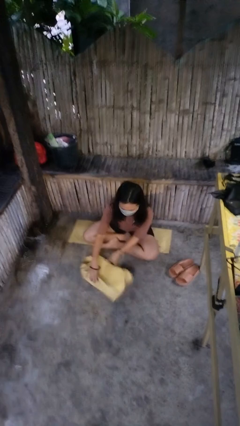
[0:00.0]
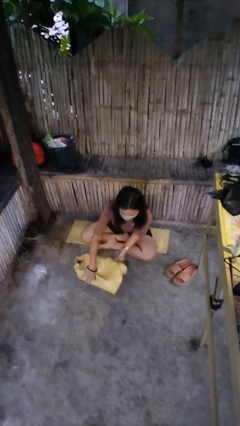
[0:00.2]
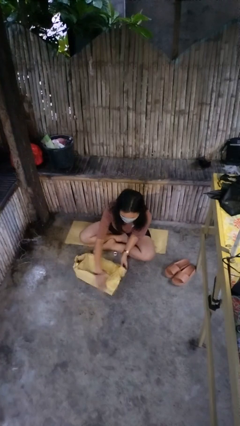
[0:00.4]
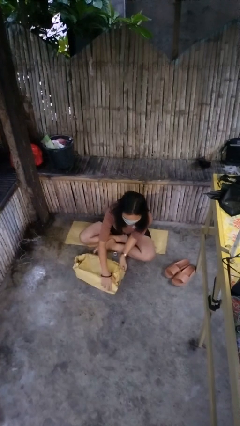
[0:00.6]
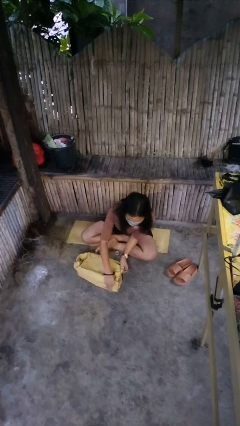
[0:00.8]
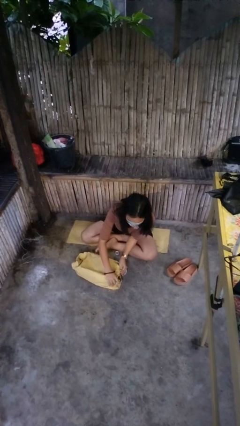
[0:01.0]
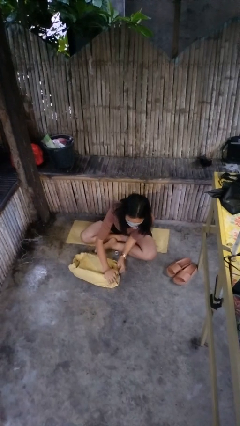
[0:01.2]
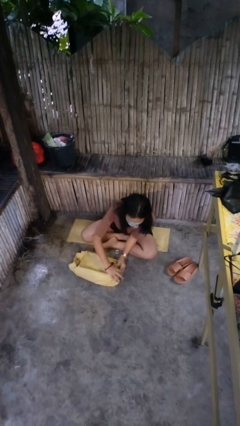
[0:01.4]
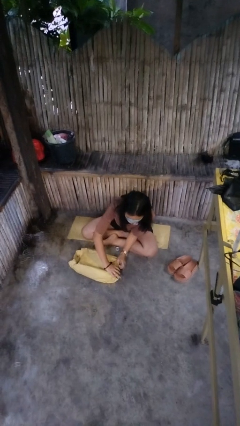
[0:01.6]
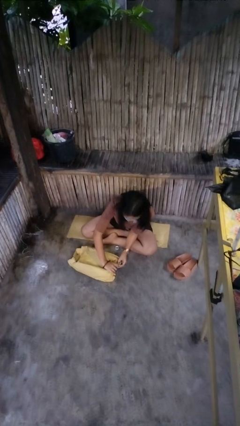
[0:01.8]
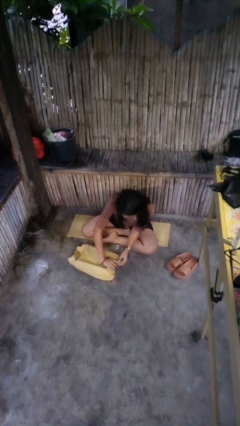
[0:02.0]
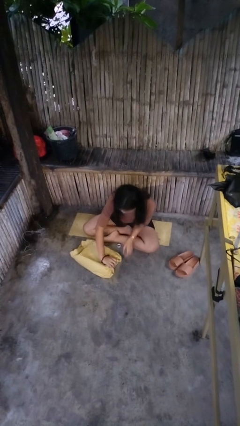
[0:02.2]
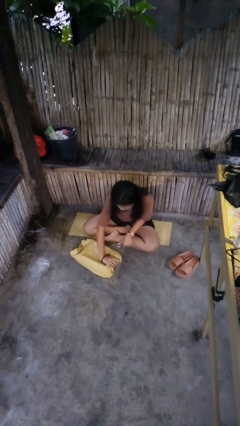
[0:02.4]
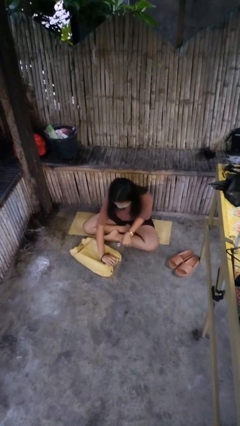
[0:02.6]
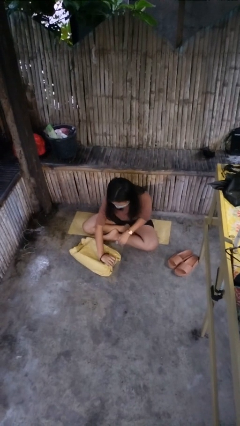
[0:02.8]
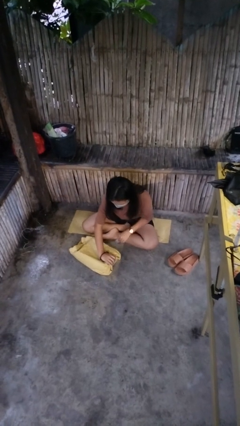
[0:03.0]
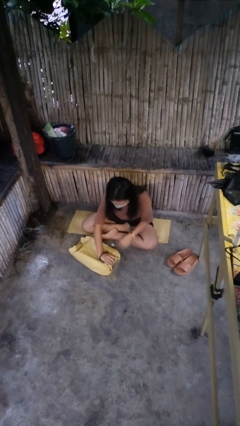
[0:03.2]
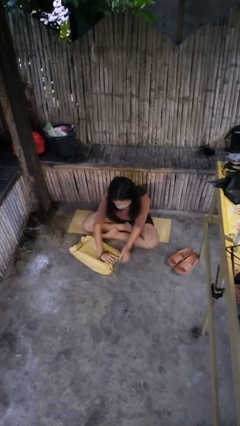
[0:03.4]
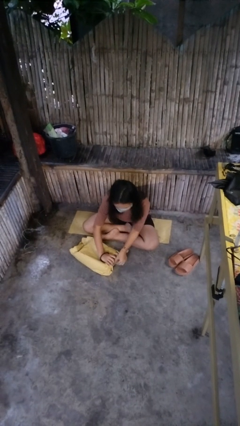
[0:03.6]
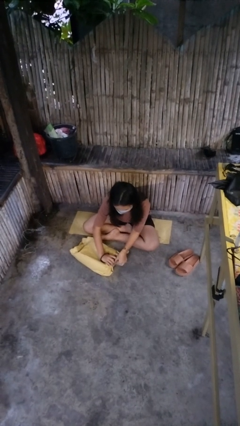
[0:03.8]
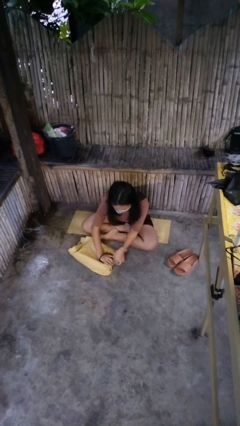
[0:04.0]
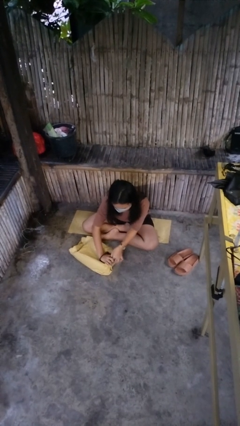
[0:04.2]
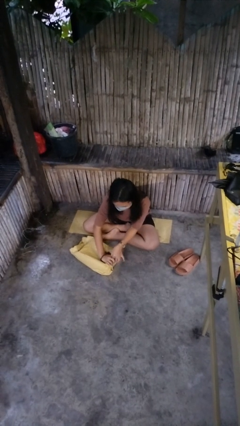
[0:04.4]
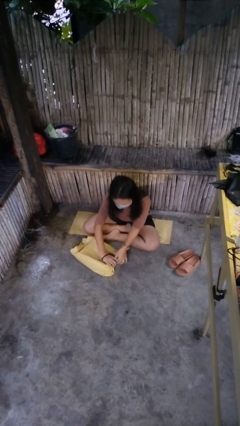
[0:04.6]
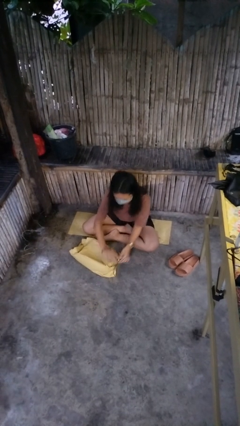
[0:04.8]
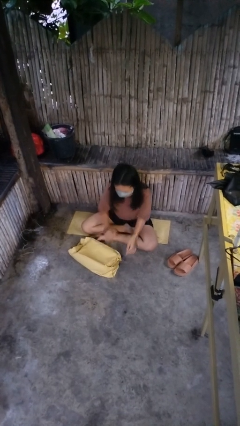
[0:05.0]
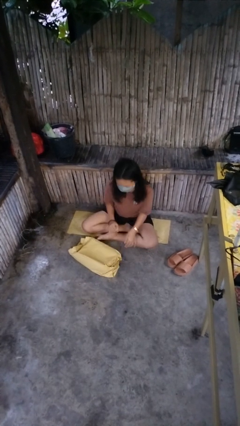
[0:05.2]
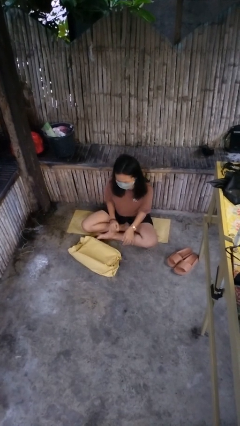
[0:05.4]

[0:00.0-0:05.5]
person wraps box

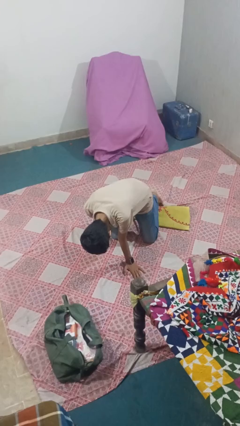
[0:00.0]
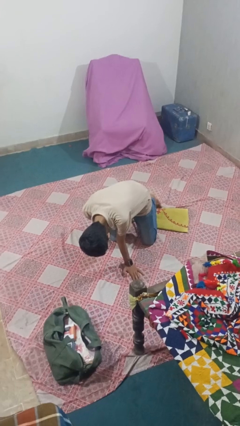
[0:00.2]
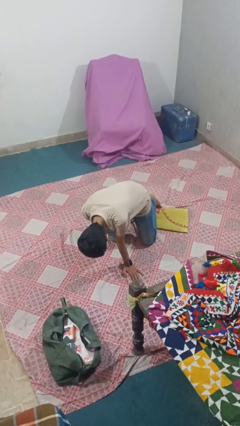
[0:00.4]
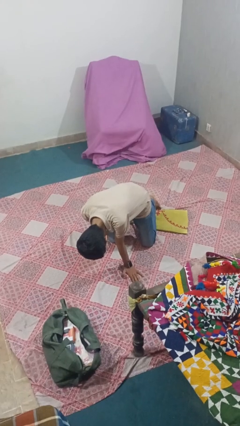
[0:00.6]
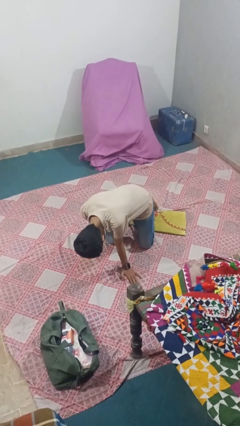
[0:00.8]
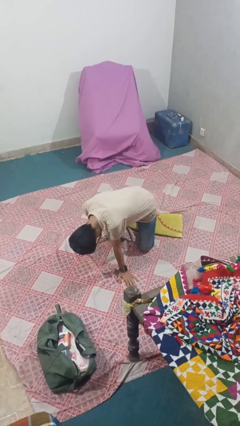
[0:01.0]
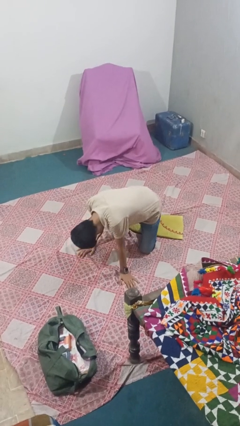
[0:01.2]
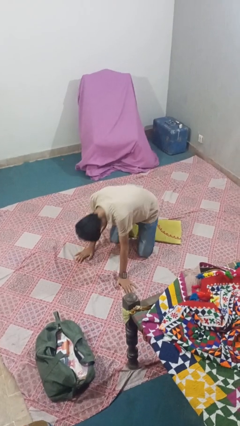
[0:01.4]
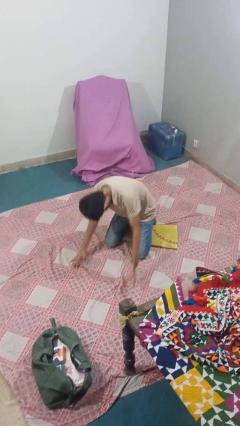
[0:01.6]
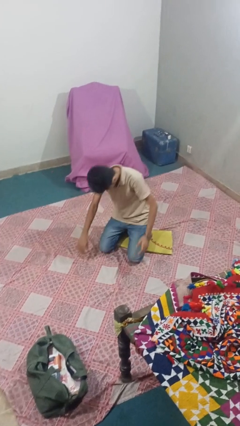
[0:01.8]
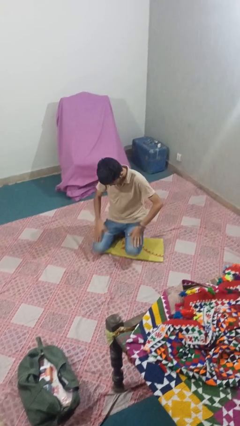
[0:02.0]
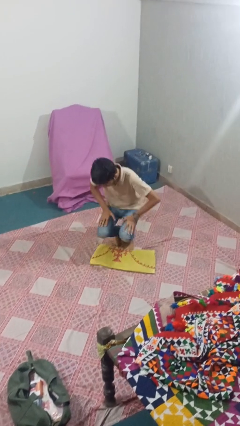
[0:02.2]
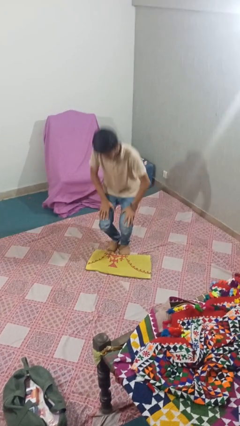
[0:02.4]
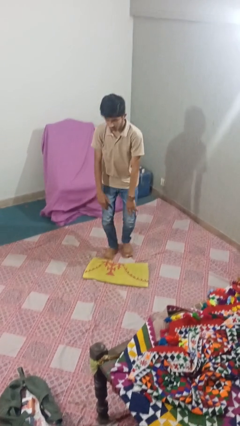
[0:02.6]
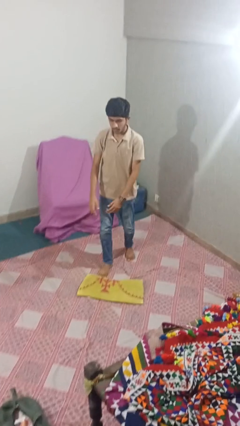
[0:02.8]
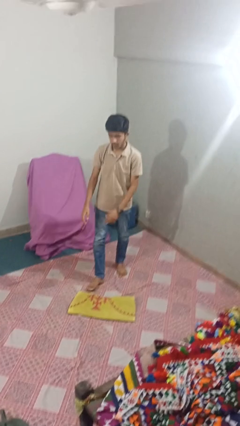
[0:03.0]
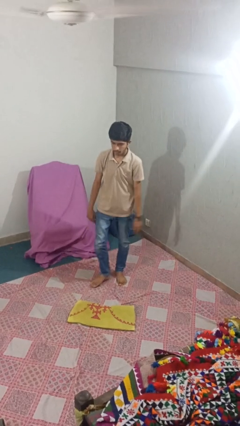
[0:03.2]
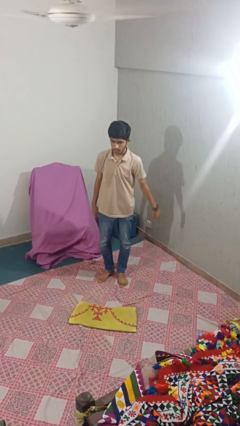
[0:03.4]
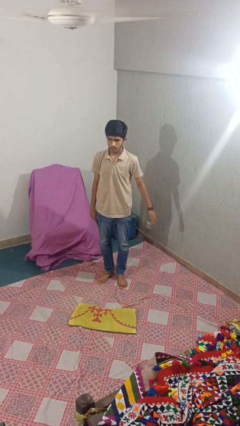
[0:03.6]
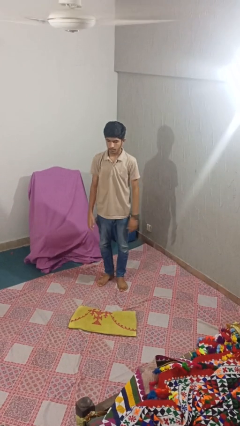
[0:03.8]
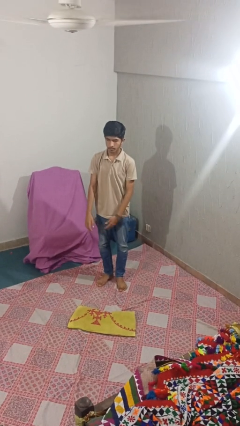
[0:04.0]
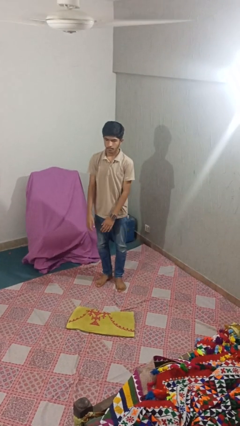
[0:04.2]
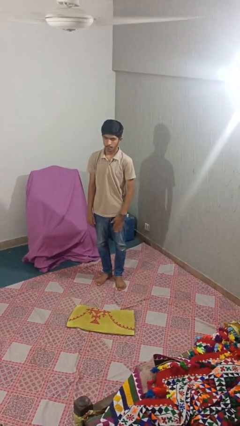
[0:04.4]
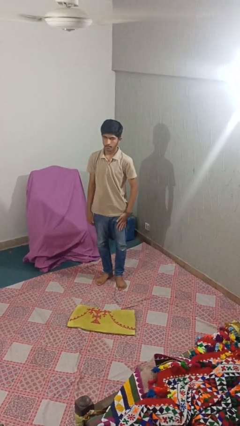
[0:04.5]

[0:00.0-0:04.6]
person stands up from floor

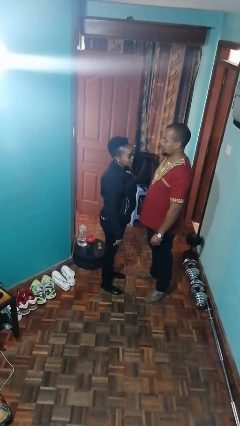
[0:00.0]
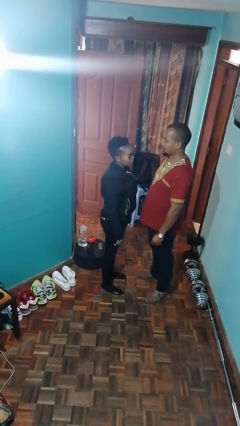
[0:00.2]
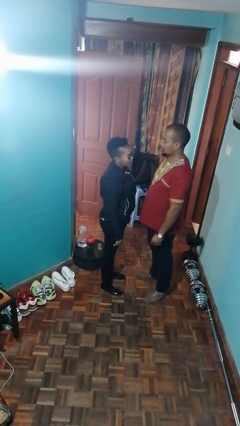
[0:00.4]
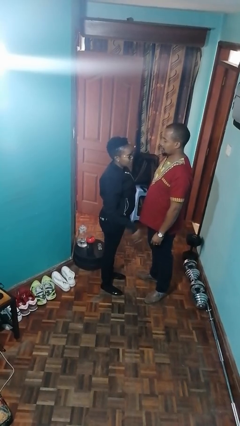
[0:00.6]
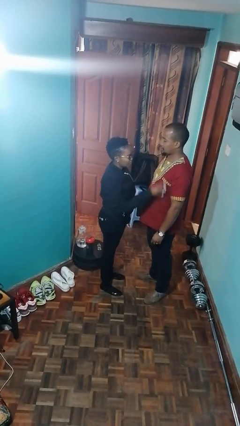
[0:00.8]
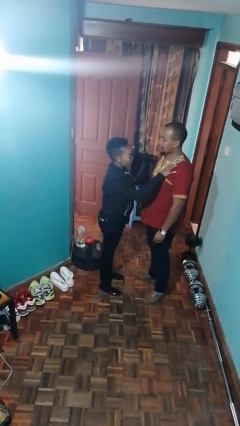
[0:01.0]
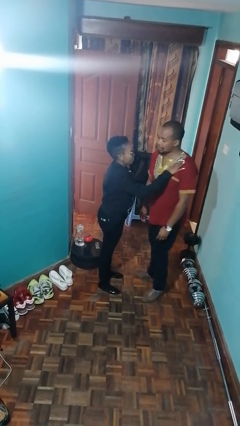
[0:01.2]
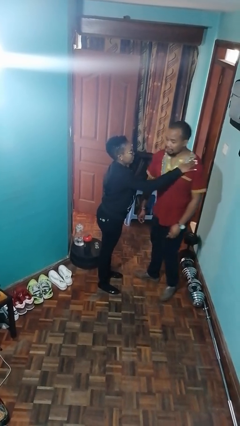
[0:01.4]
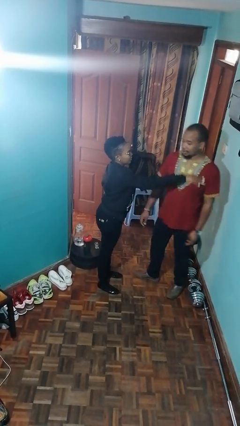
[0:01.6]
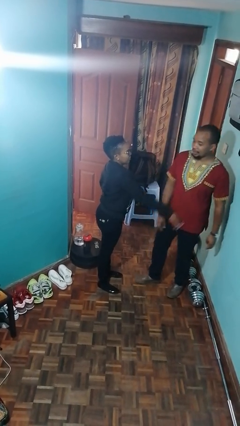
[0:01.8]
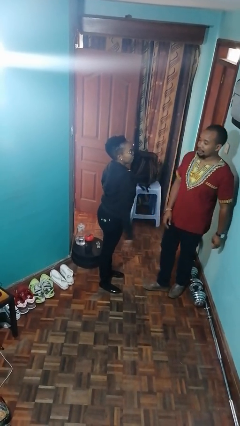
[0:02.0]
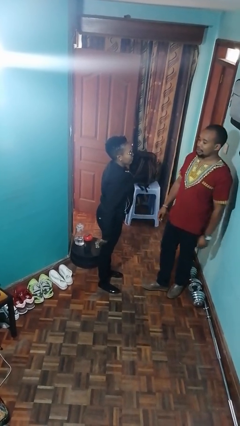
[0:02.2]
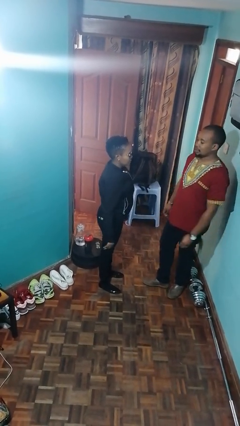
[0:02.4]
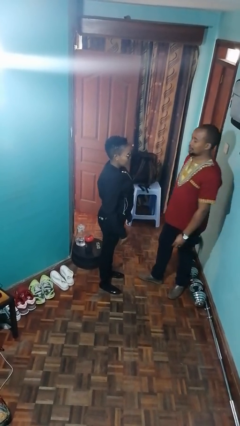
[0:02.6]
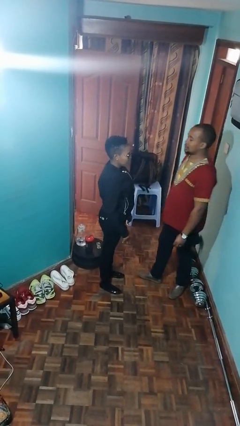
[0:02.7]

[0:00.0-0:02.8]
person shoves person

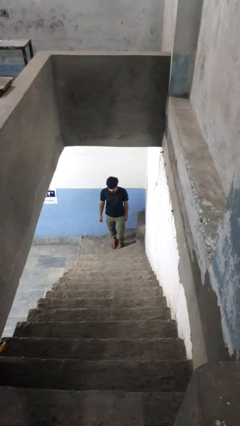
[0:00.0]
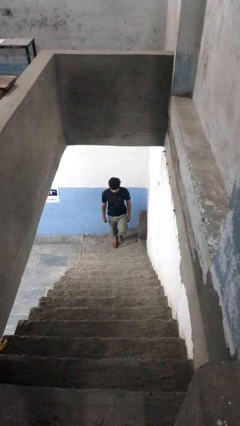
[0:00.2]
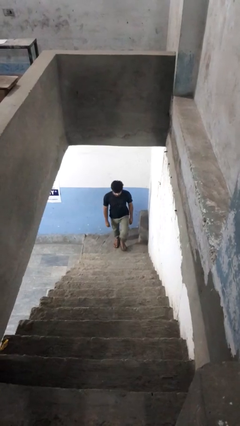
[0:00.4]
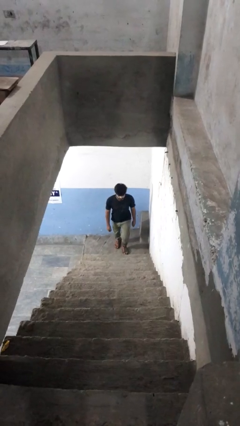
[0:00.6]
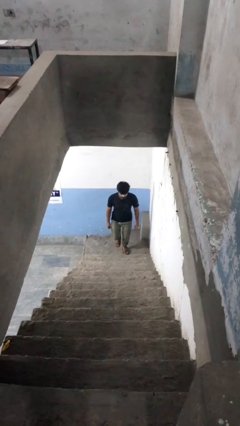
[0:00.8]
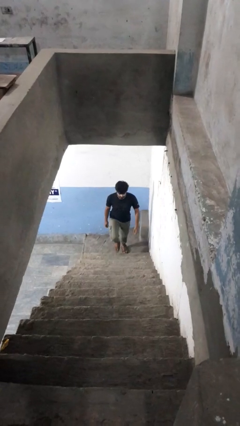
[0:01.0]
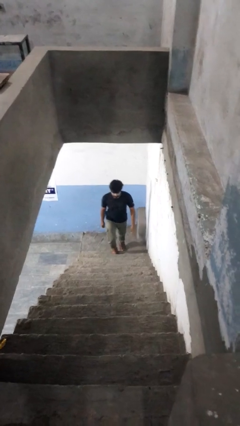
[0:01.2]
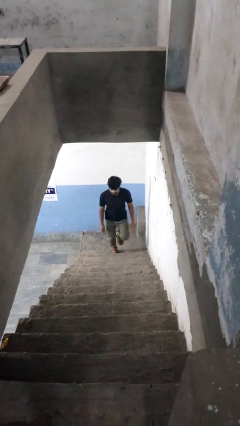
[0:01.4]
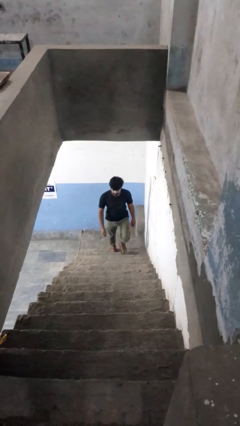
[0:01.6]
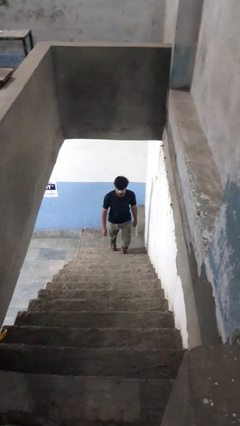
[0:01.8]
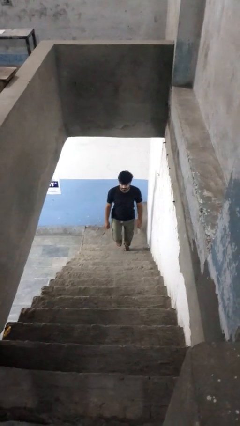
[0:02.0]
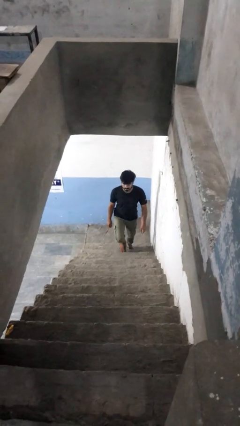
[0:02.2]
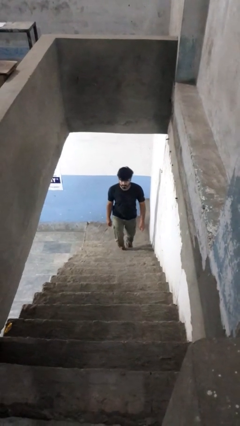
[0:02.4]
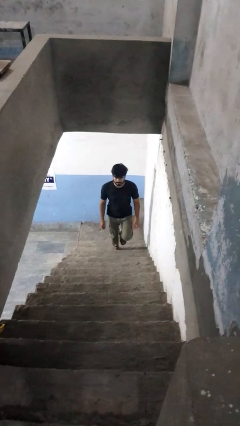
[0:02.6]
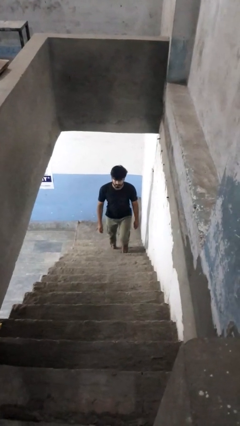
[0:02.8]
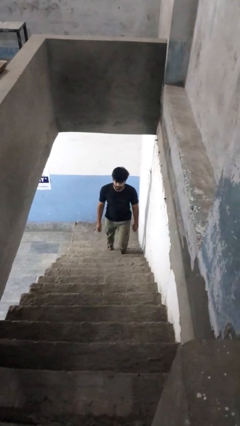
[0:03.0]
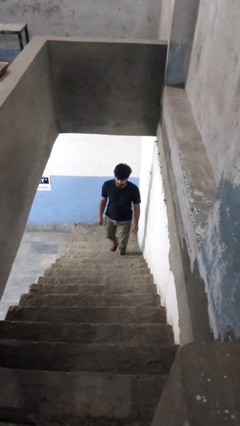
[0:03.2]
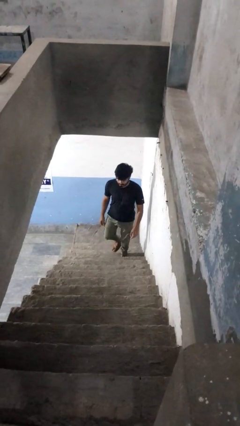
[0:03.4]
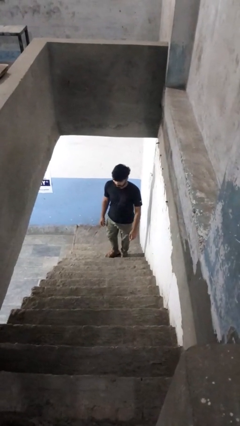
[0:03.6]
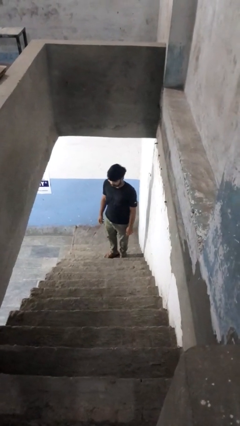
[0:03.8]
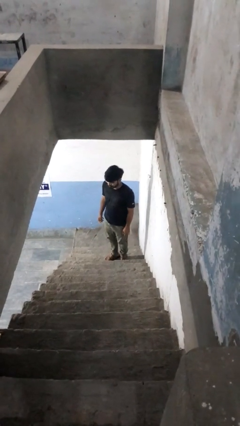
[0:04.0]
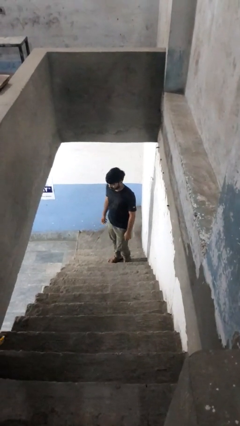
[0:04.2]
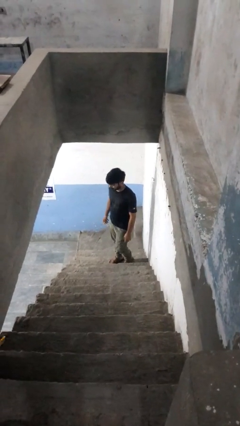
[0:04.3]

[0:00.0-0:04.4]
person climbs up stairs

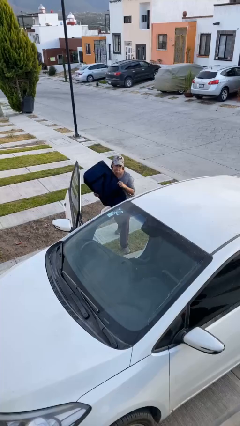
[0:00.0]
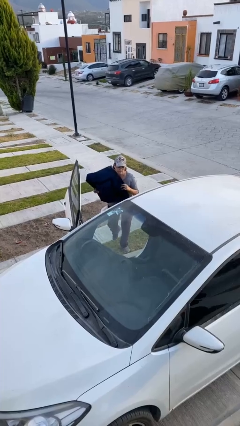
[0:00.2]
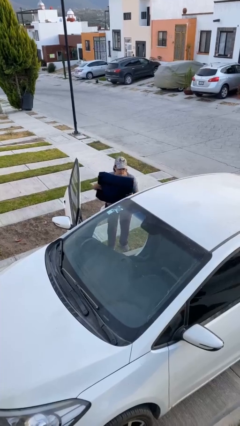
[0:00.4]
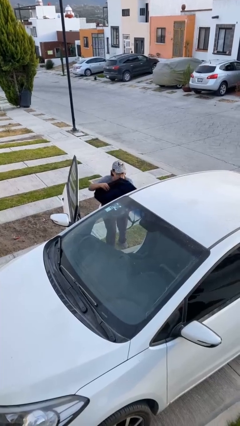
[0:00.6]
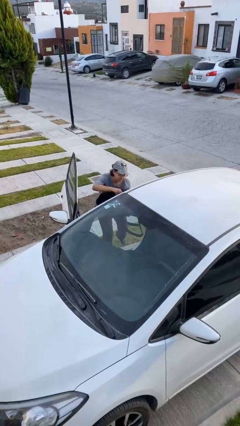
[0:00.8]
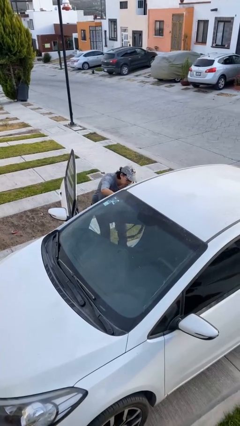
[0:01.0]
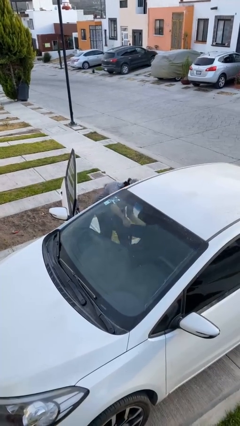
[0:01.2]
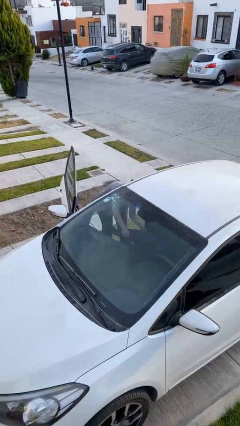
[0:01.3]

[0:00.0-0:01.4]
person loads car
